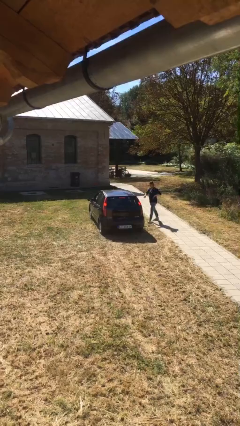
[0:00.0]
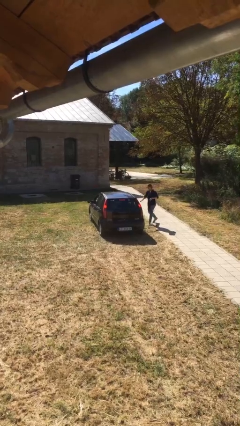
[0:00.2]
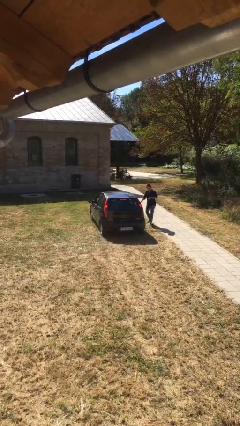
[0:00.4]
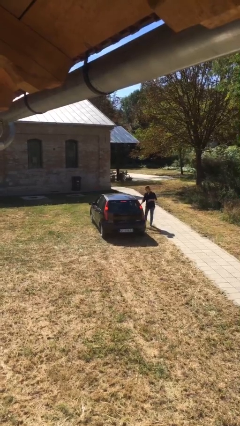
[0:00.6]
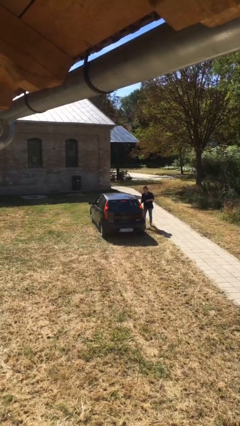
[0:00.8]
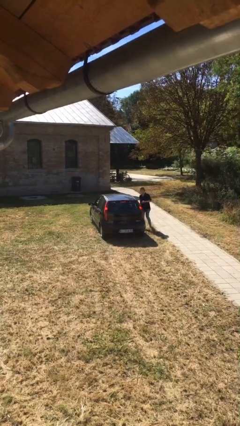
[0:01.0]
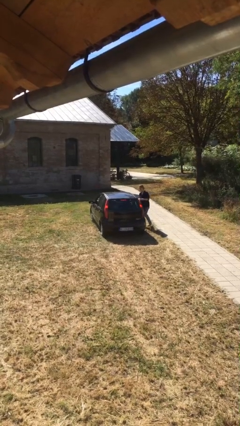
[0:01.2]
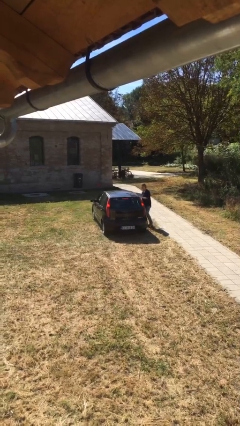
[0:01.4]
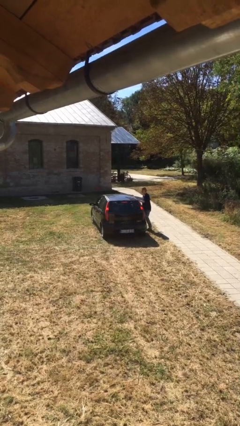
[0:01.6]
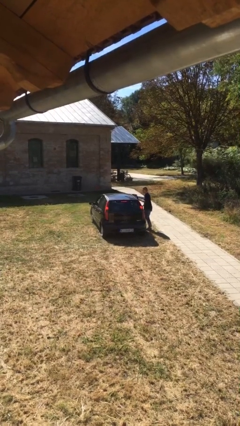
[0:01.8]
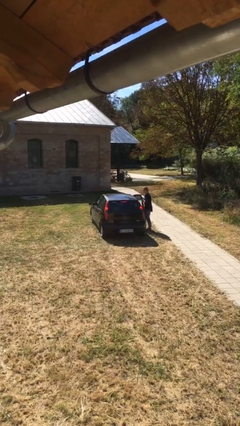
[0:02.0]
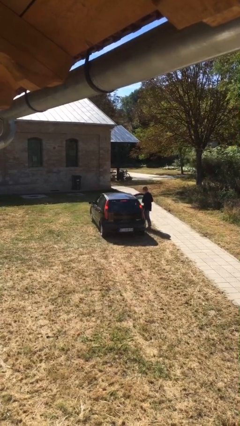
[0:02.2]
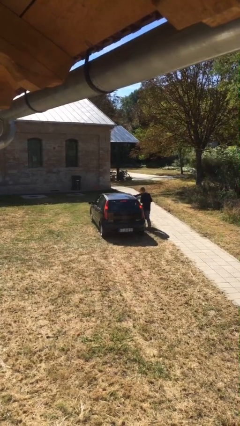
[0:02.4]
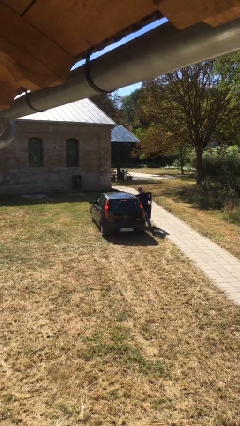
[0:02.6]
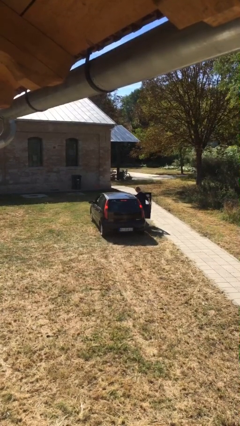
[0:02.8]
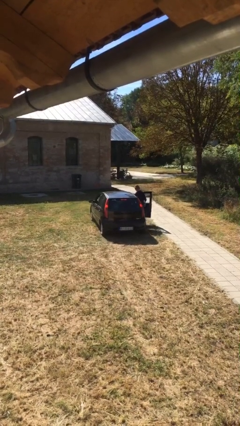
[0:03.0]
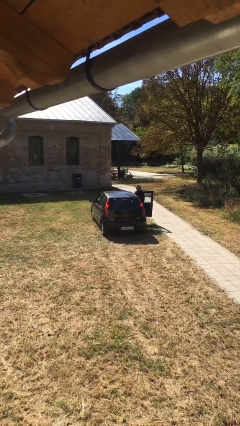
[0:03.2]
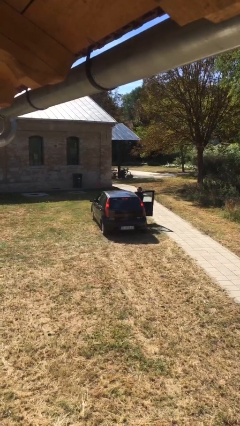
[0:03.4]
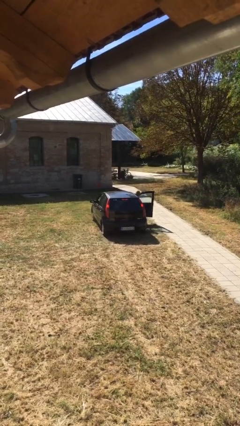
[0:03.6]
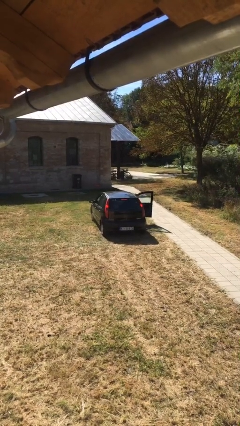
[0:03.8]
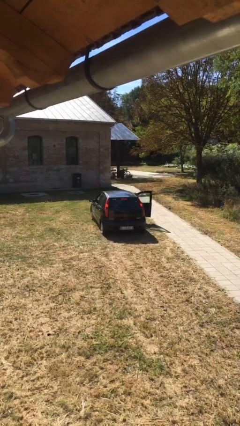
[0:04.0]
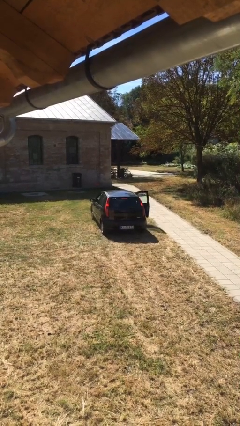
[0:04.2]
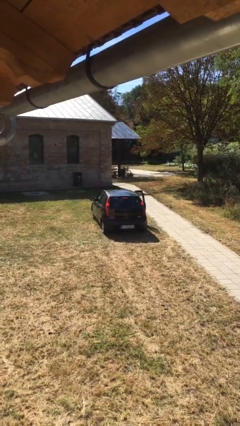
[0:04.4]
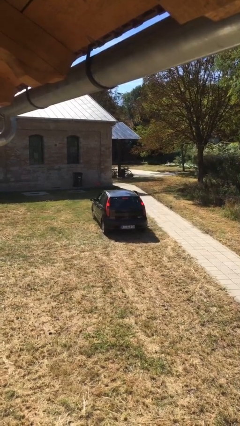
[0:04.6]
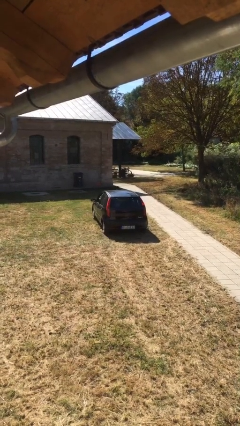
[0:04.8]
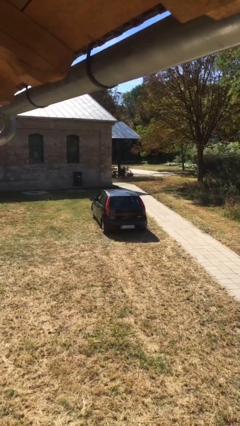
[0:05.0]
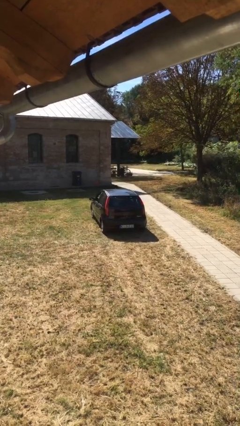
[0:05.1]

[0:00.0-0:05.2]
car picks up person

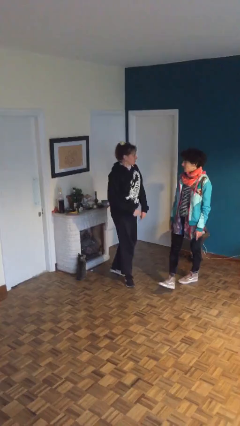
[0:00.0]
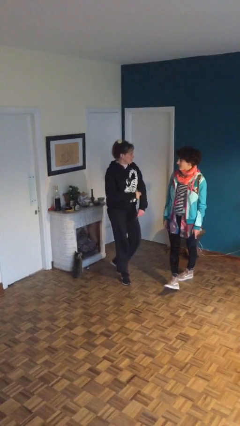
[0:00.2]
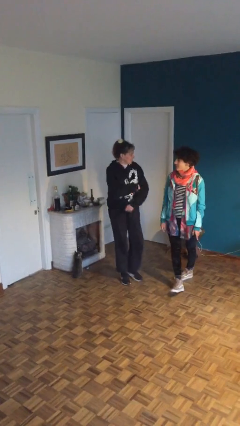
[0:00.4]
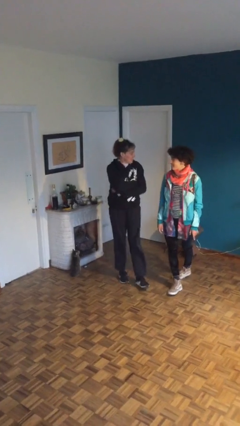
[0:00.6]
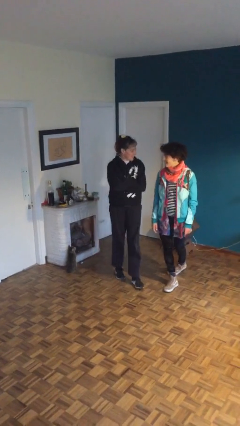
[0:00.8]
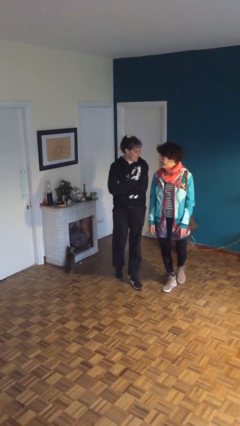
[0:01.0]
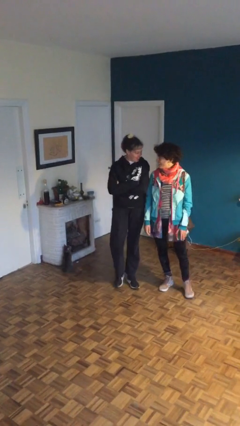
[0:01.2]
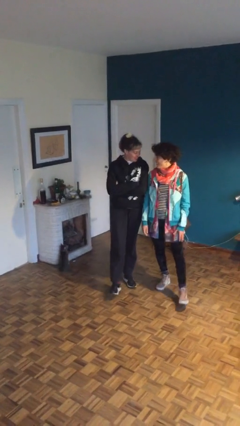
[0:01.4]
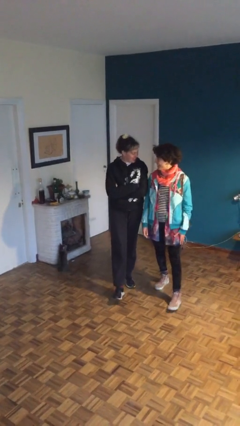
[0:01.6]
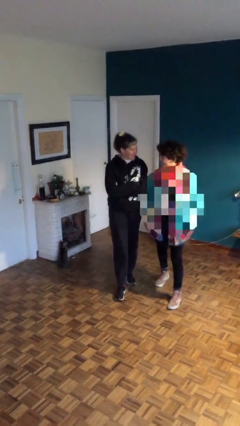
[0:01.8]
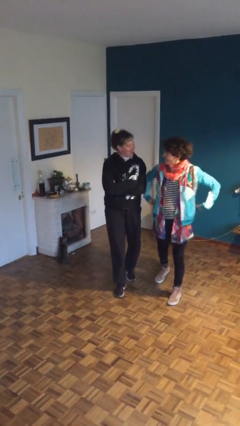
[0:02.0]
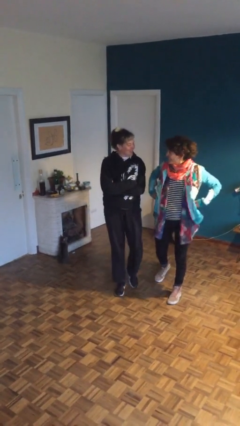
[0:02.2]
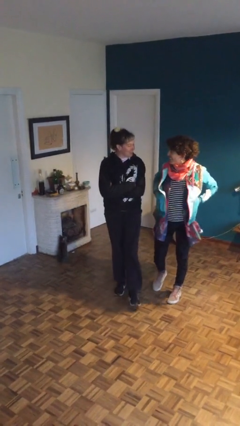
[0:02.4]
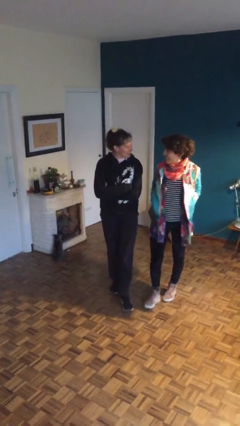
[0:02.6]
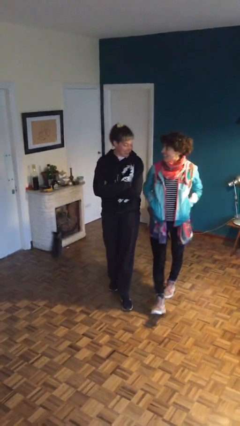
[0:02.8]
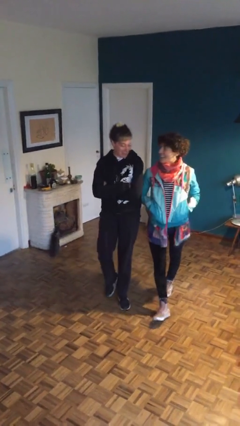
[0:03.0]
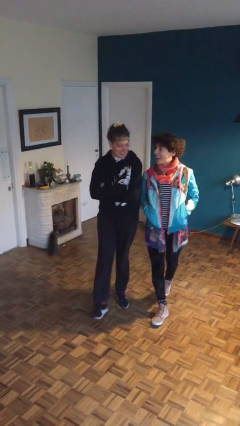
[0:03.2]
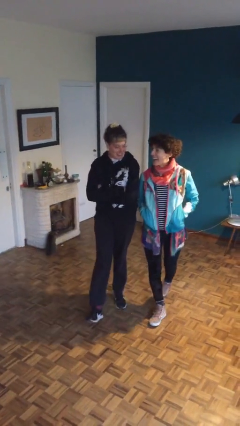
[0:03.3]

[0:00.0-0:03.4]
person talks to person

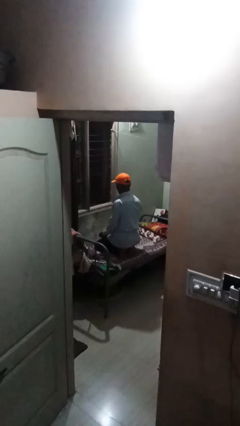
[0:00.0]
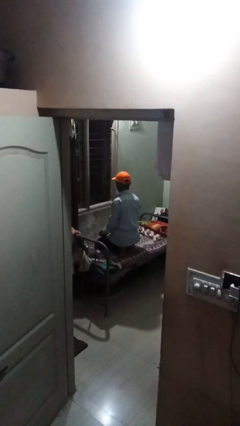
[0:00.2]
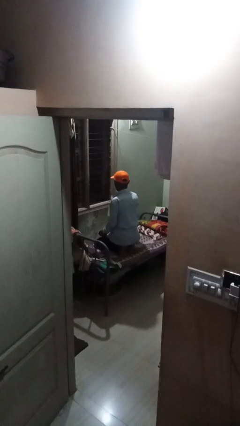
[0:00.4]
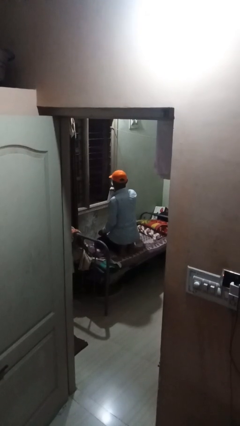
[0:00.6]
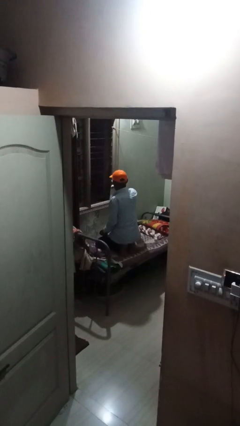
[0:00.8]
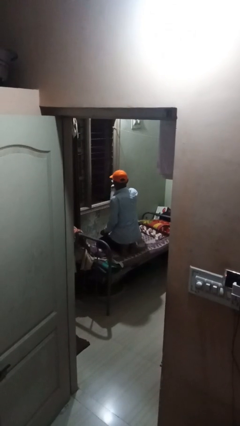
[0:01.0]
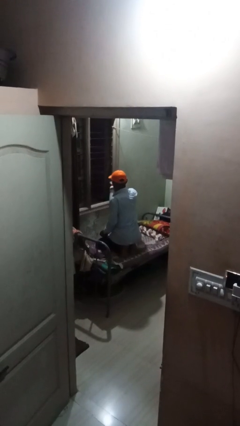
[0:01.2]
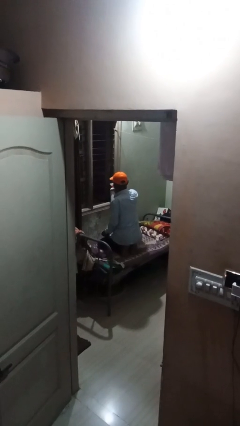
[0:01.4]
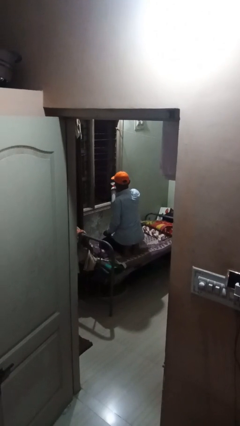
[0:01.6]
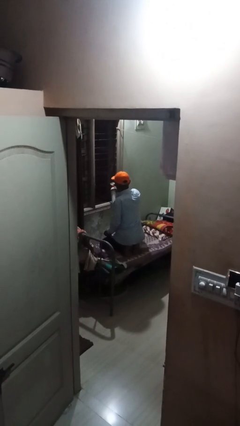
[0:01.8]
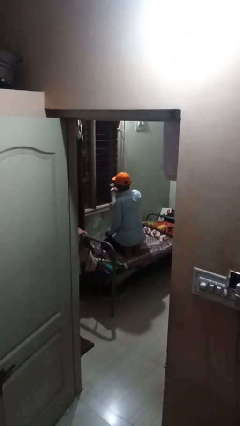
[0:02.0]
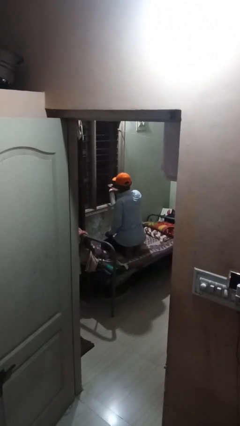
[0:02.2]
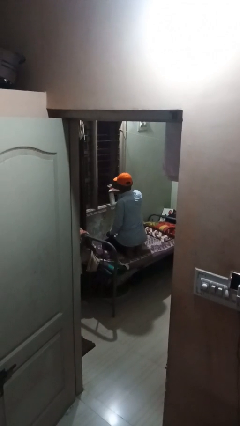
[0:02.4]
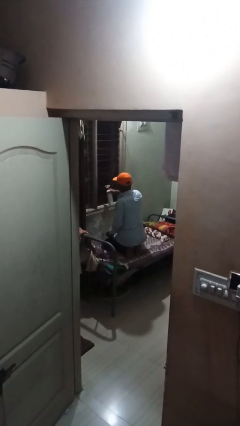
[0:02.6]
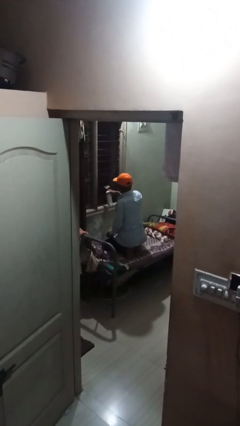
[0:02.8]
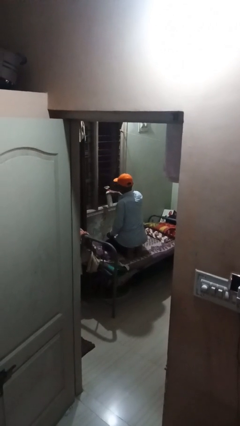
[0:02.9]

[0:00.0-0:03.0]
person sprays from bottle

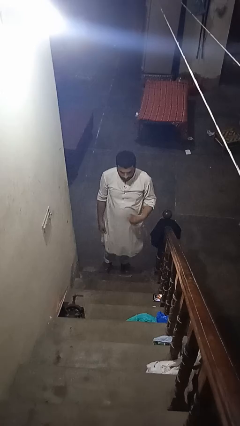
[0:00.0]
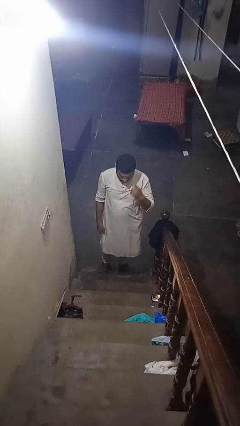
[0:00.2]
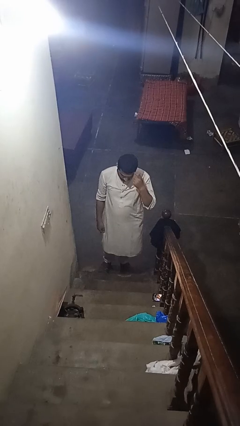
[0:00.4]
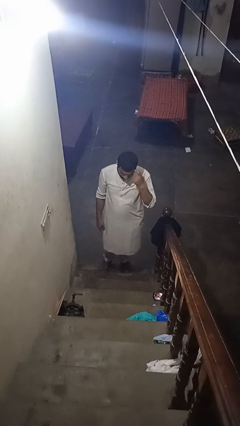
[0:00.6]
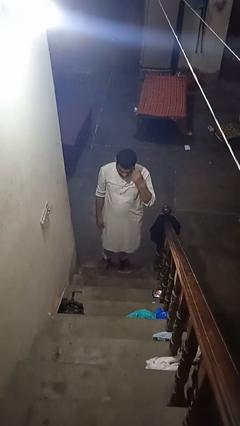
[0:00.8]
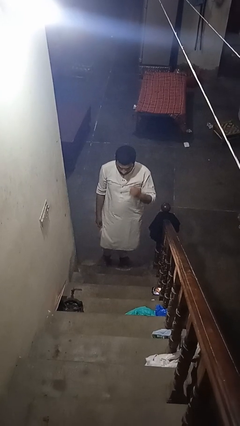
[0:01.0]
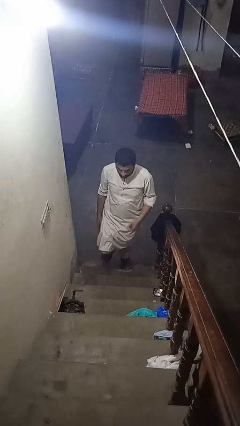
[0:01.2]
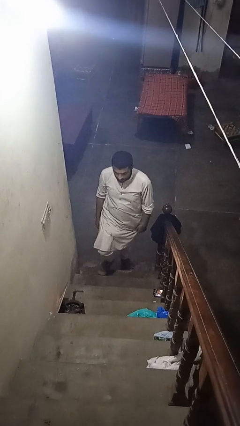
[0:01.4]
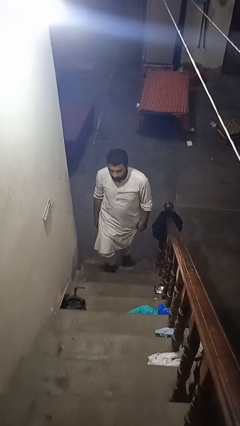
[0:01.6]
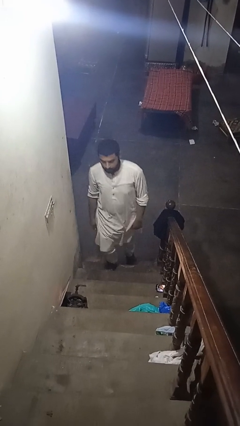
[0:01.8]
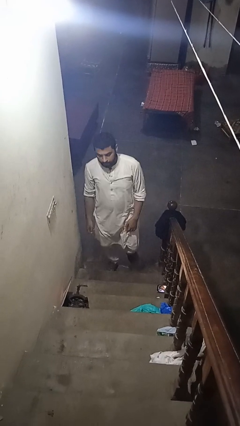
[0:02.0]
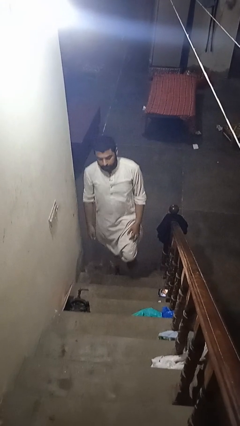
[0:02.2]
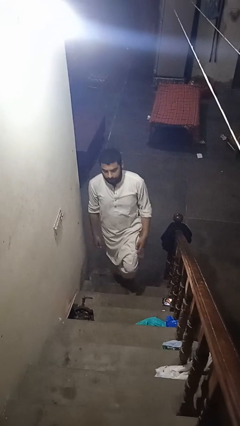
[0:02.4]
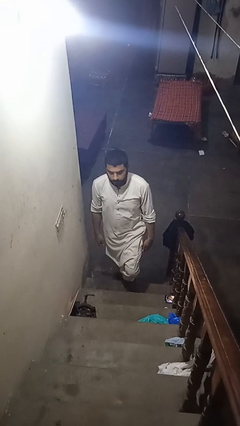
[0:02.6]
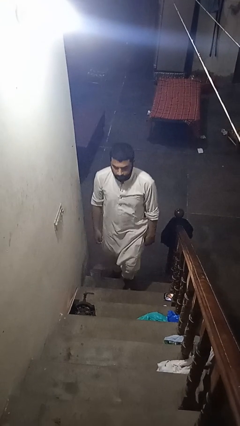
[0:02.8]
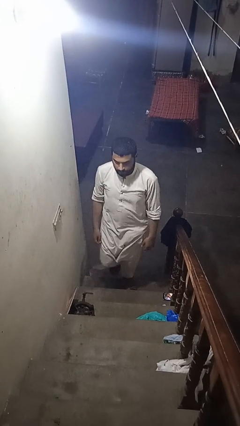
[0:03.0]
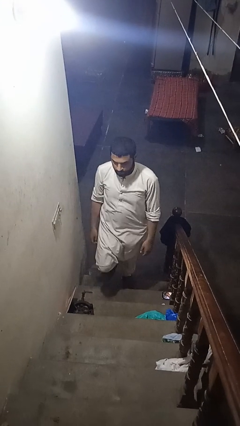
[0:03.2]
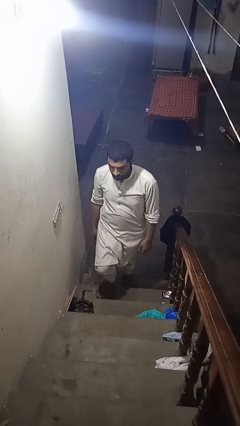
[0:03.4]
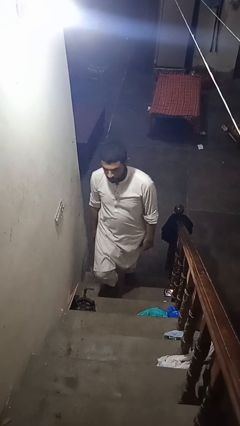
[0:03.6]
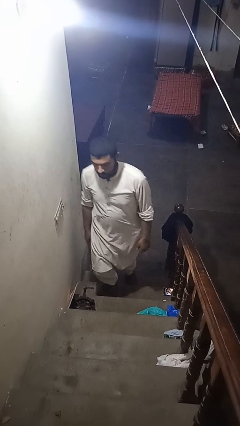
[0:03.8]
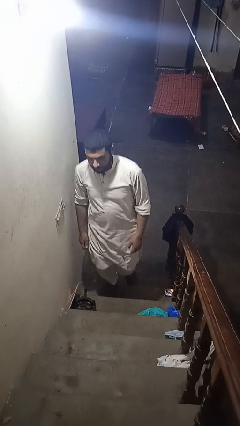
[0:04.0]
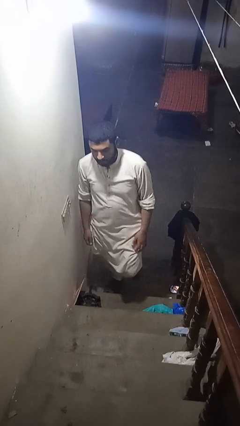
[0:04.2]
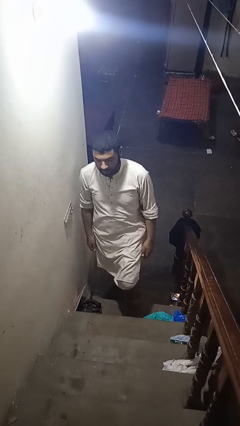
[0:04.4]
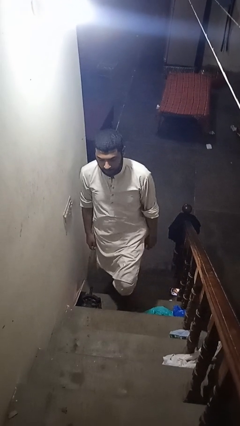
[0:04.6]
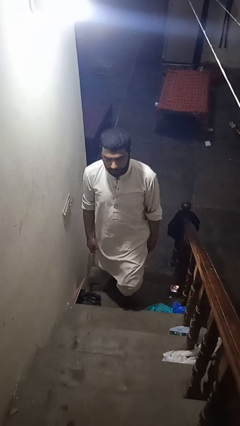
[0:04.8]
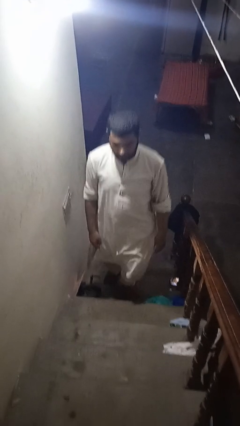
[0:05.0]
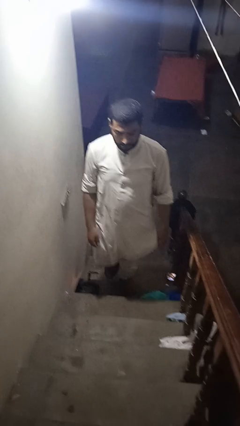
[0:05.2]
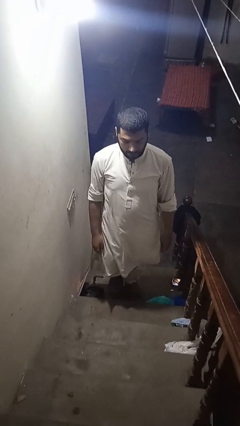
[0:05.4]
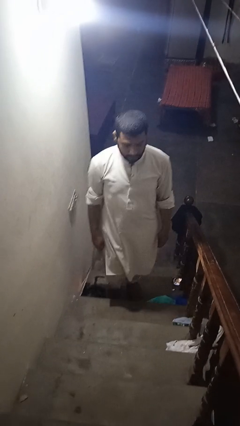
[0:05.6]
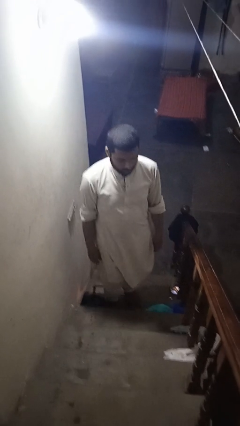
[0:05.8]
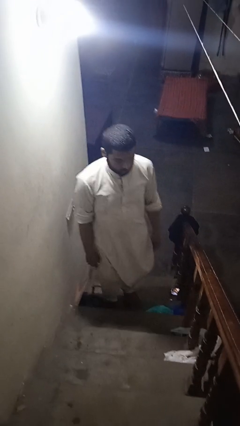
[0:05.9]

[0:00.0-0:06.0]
person climbs up stairs
